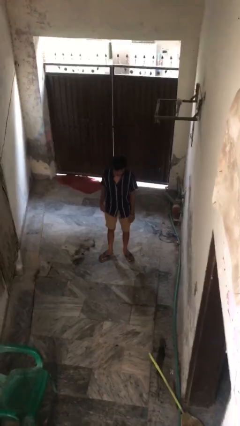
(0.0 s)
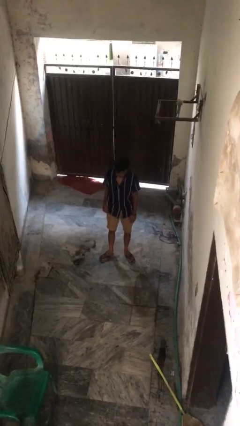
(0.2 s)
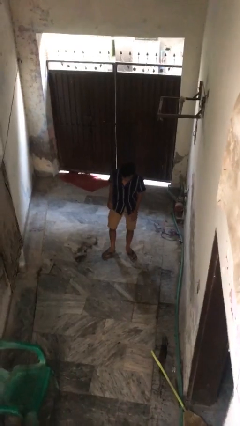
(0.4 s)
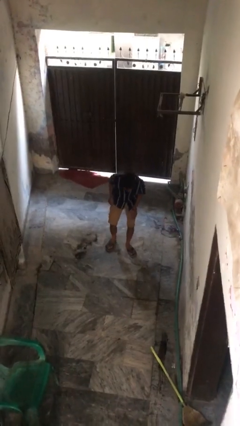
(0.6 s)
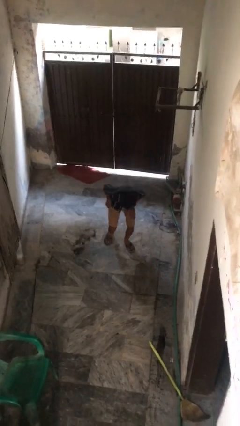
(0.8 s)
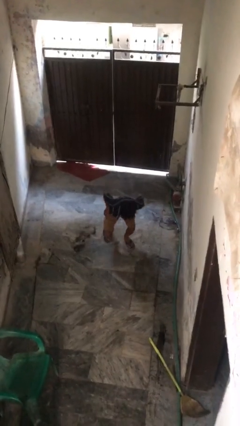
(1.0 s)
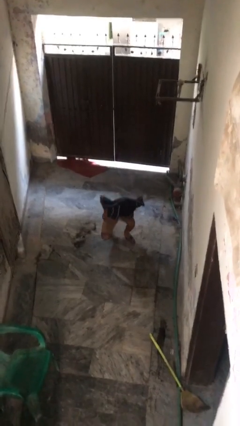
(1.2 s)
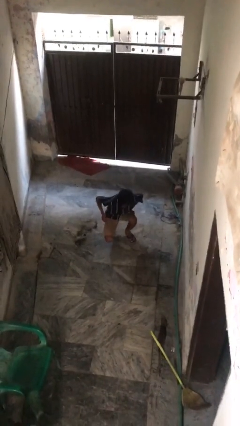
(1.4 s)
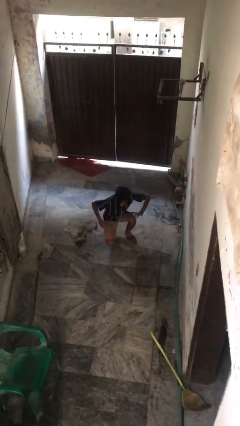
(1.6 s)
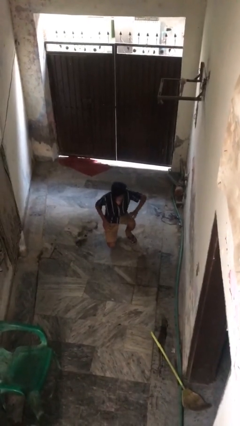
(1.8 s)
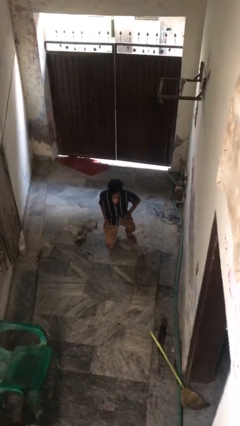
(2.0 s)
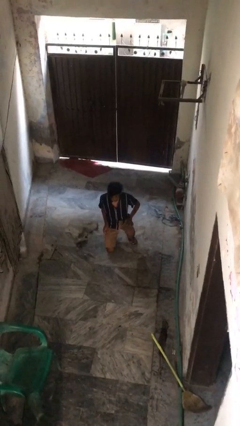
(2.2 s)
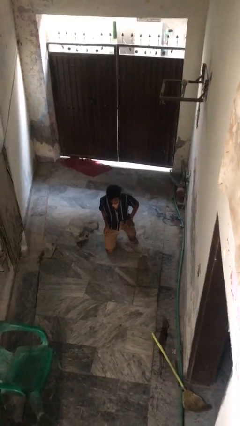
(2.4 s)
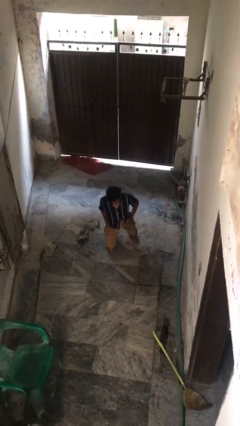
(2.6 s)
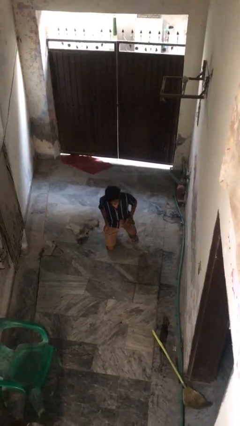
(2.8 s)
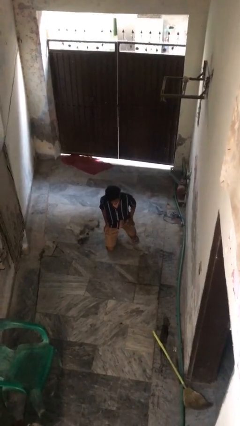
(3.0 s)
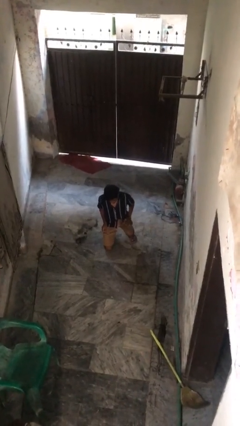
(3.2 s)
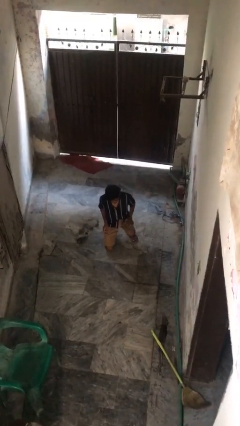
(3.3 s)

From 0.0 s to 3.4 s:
person kneels

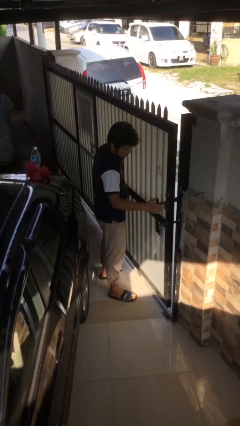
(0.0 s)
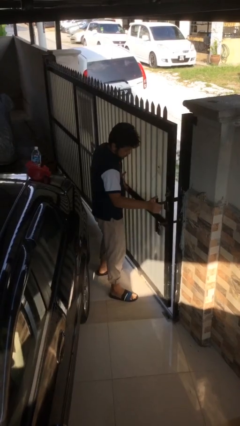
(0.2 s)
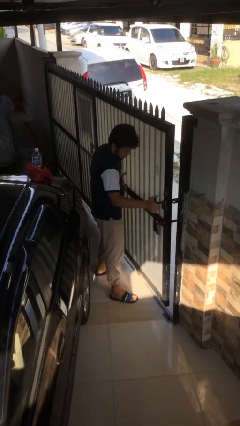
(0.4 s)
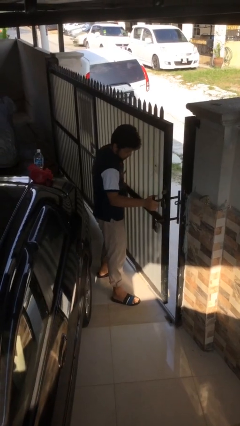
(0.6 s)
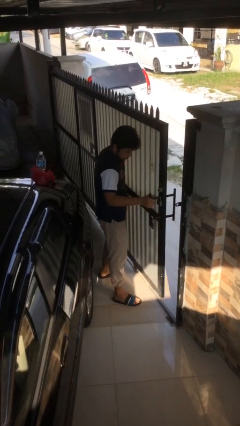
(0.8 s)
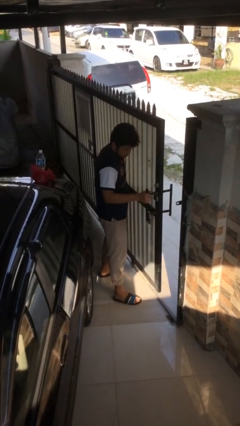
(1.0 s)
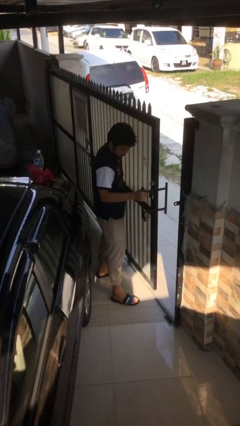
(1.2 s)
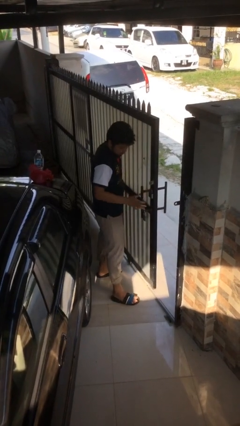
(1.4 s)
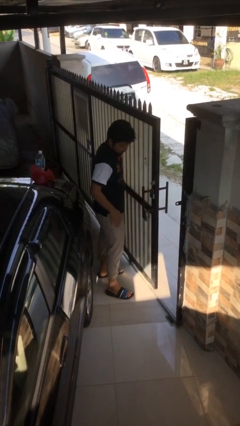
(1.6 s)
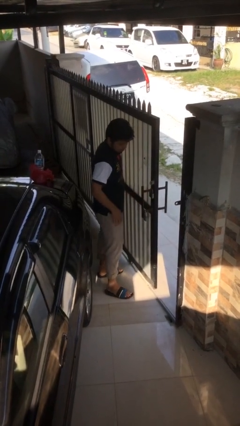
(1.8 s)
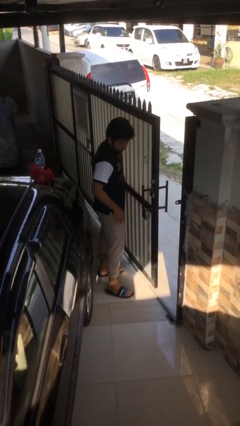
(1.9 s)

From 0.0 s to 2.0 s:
person opens sliding door

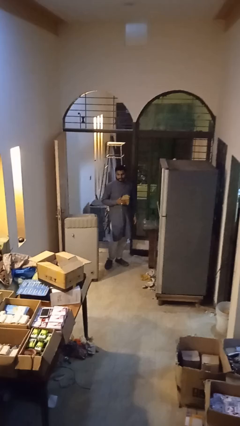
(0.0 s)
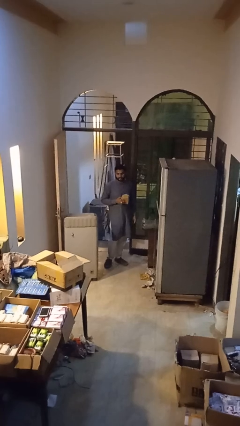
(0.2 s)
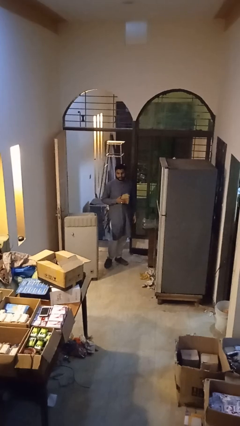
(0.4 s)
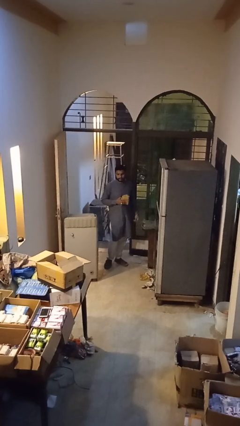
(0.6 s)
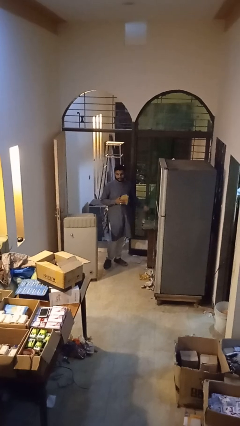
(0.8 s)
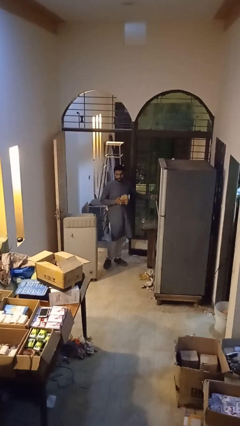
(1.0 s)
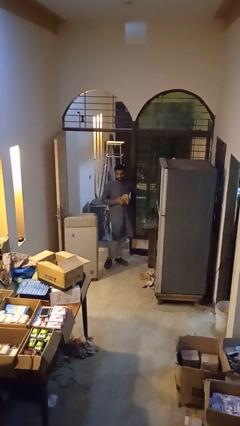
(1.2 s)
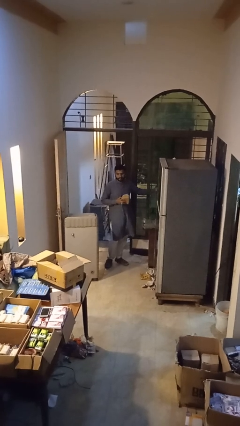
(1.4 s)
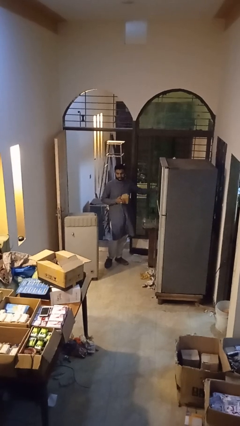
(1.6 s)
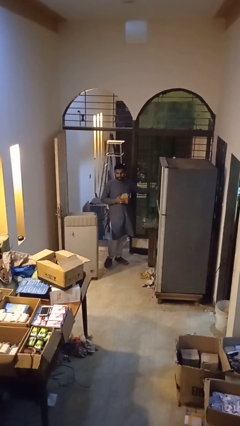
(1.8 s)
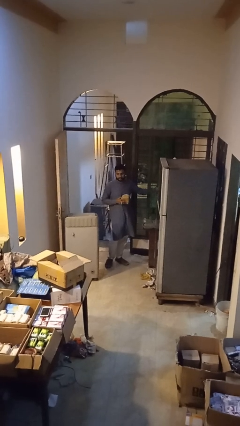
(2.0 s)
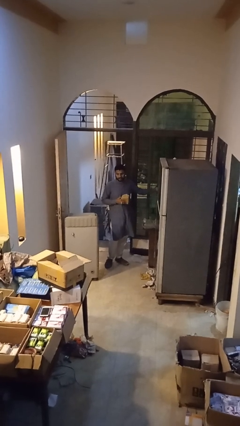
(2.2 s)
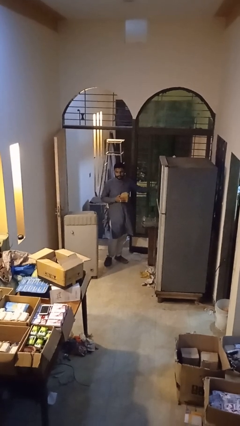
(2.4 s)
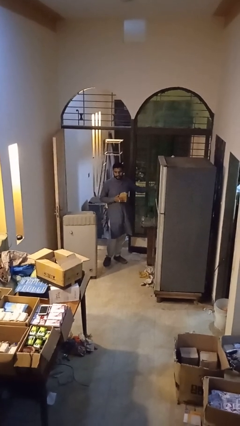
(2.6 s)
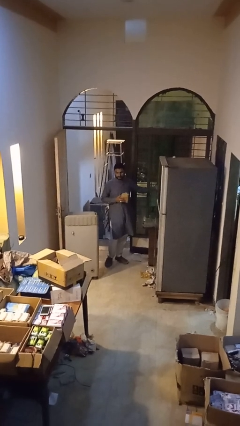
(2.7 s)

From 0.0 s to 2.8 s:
person plugs into electrical socket

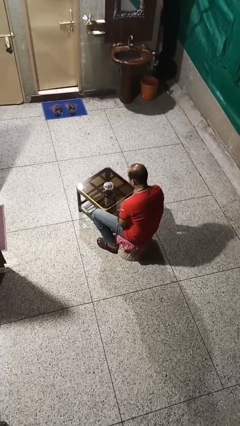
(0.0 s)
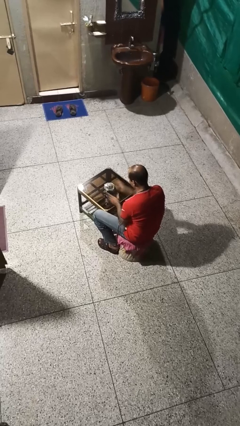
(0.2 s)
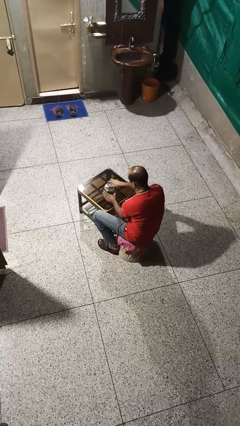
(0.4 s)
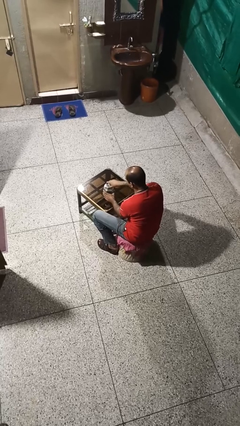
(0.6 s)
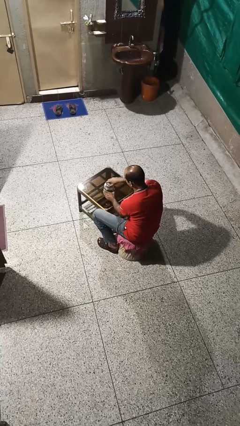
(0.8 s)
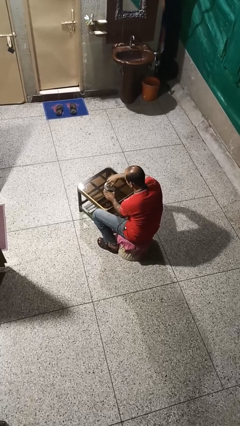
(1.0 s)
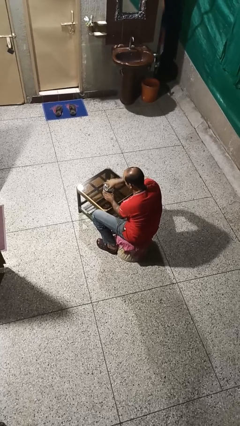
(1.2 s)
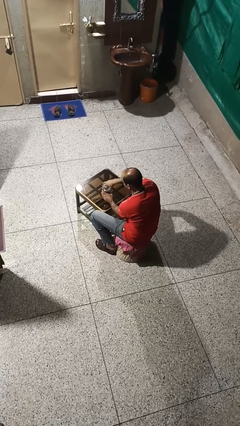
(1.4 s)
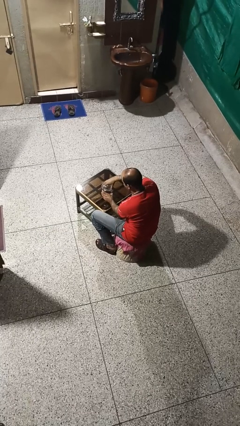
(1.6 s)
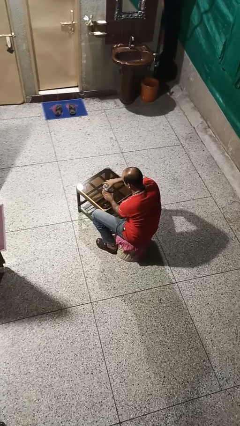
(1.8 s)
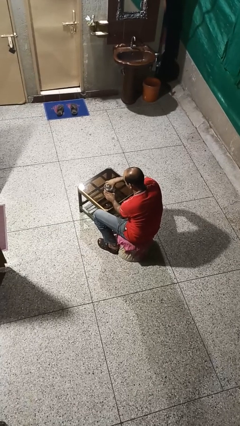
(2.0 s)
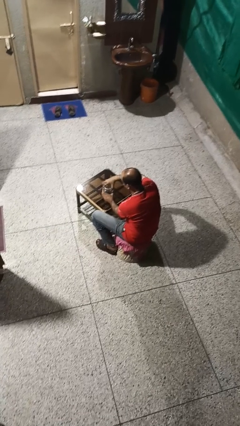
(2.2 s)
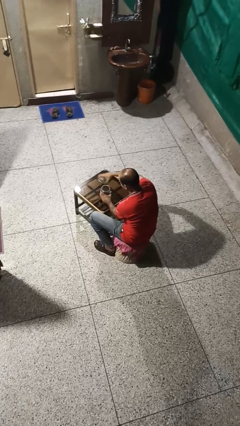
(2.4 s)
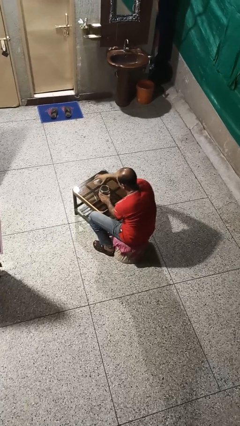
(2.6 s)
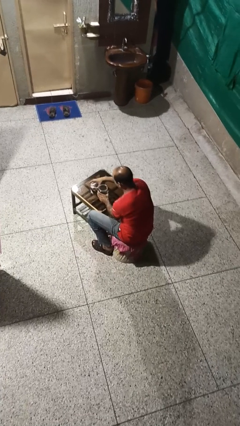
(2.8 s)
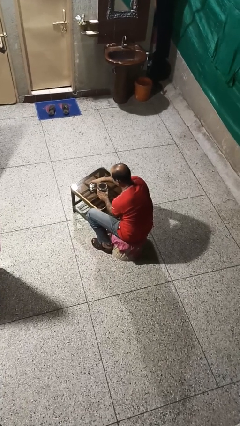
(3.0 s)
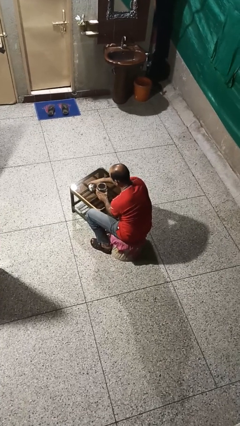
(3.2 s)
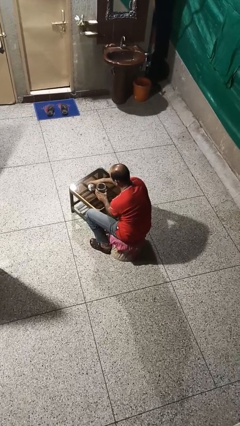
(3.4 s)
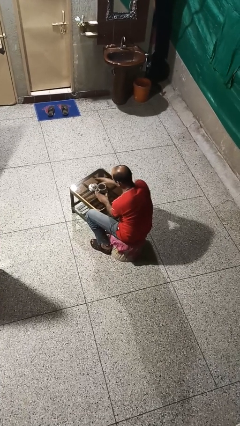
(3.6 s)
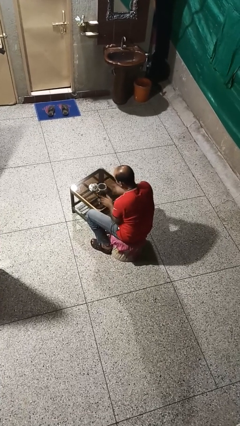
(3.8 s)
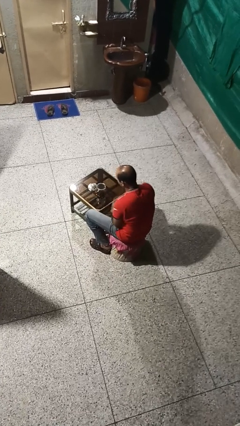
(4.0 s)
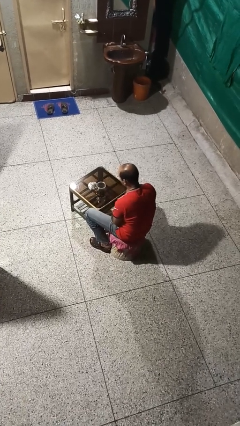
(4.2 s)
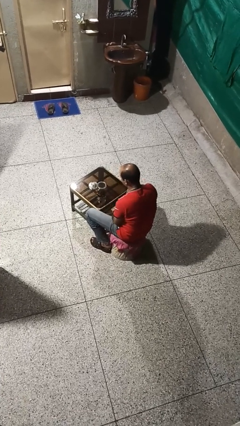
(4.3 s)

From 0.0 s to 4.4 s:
person opens jar

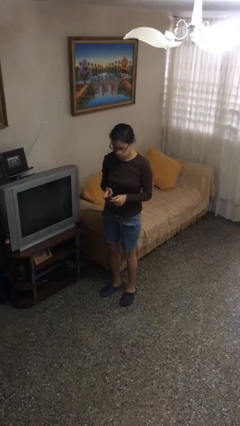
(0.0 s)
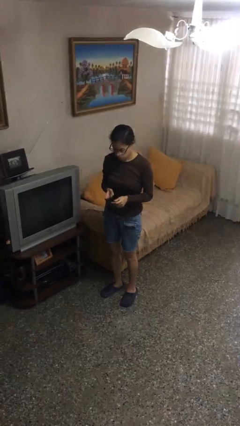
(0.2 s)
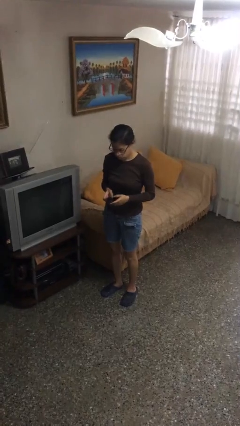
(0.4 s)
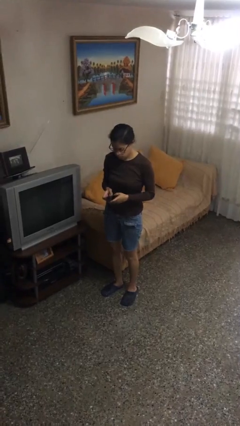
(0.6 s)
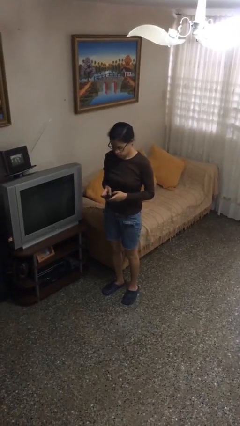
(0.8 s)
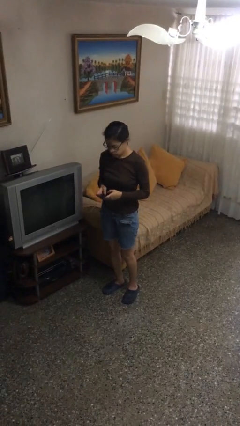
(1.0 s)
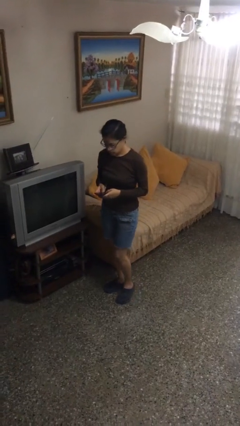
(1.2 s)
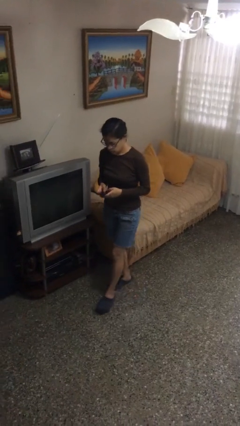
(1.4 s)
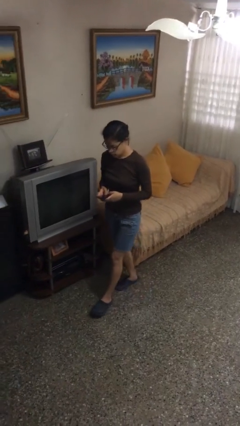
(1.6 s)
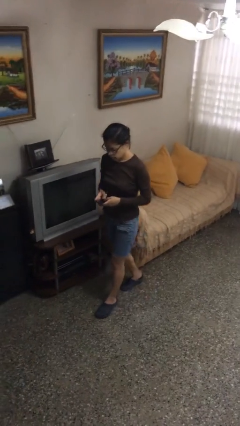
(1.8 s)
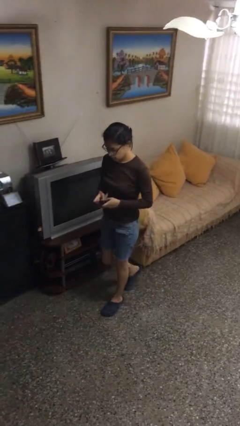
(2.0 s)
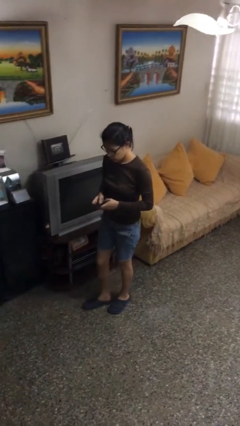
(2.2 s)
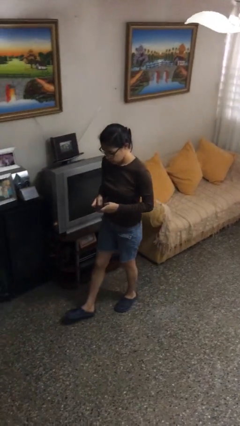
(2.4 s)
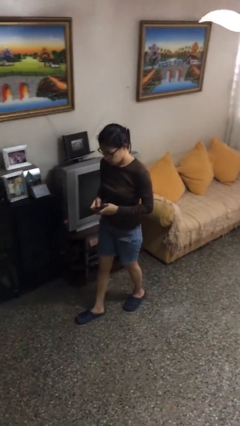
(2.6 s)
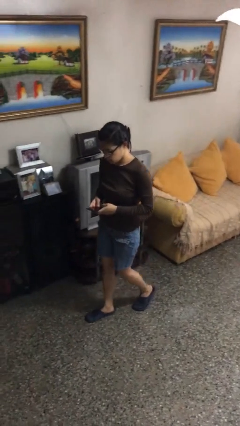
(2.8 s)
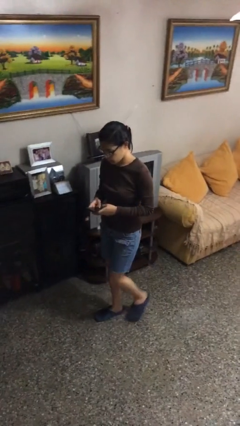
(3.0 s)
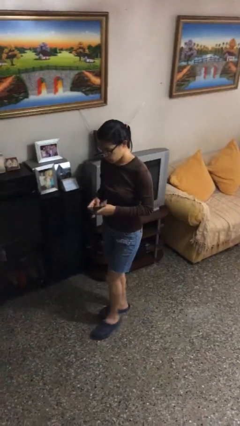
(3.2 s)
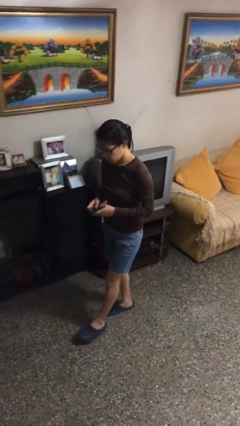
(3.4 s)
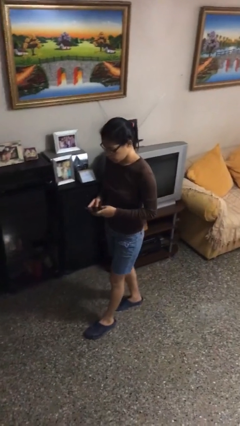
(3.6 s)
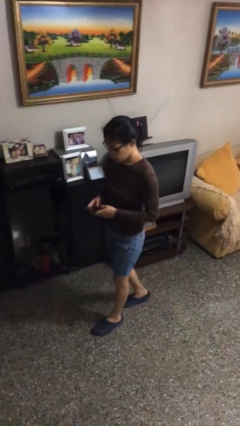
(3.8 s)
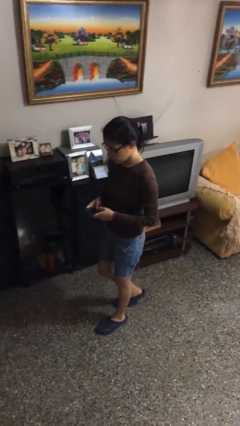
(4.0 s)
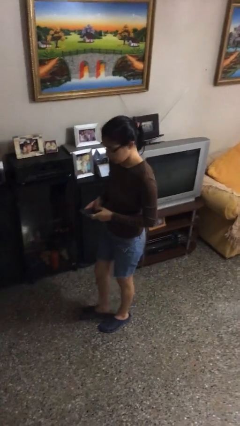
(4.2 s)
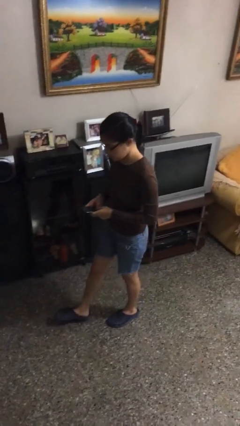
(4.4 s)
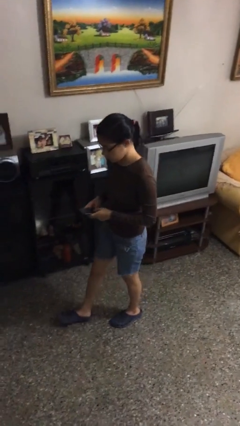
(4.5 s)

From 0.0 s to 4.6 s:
person texts on phone

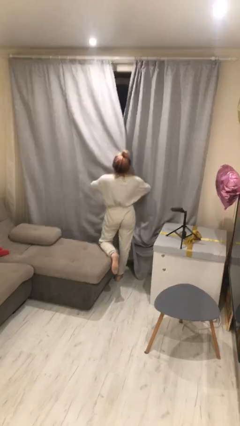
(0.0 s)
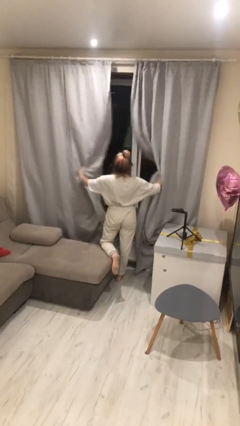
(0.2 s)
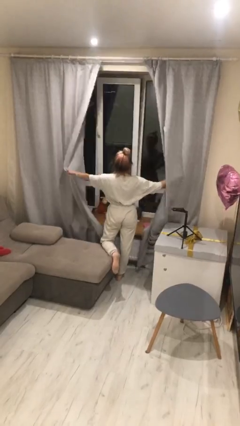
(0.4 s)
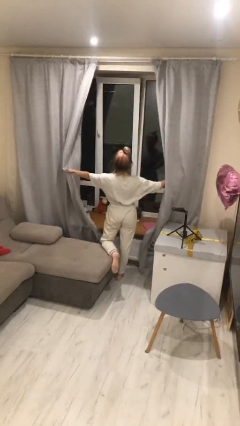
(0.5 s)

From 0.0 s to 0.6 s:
person opens curtains
